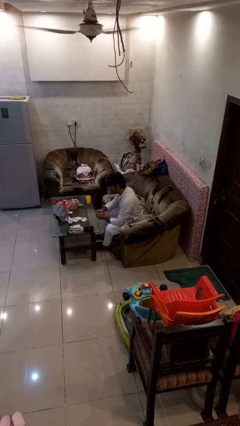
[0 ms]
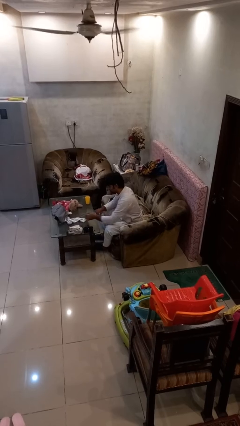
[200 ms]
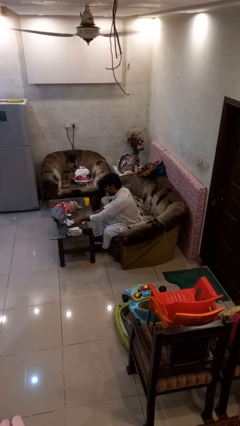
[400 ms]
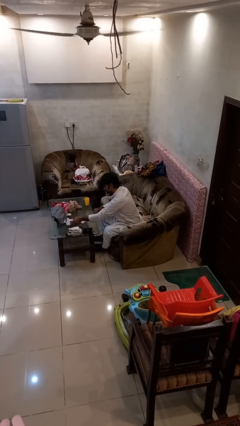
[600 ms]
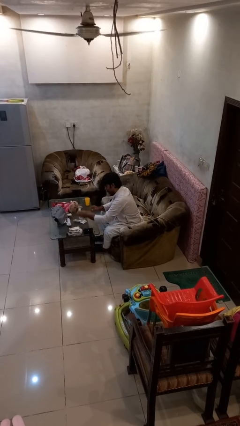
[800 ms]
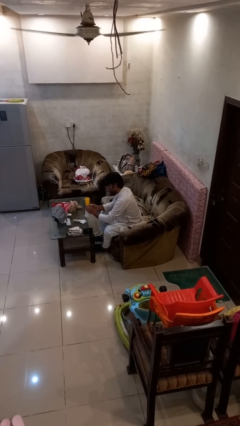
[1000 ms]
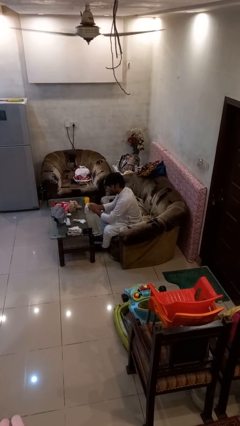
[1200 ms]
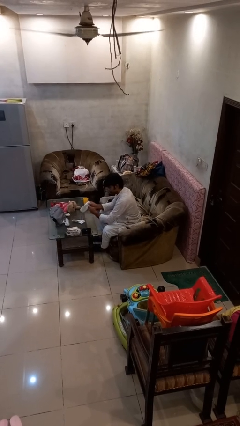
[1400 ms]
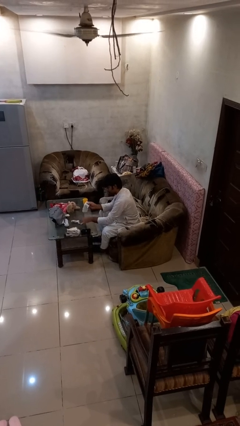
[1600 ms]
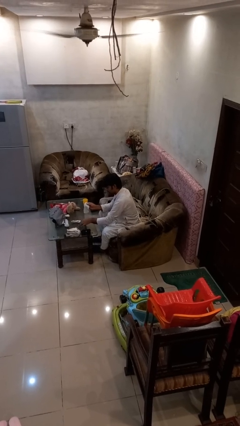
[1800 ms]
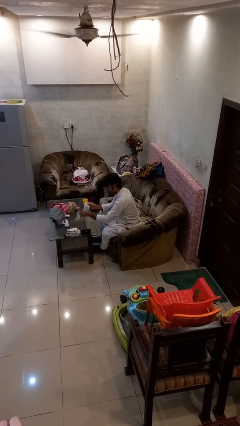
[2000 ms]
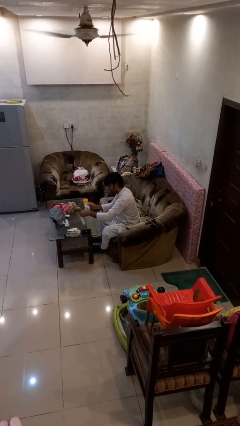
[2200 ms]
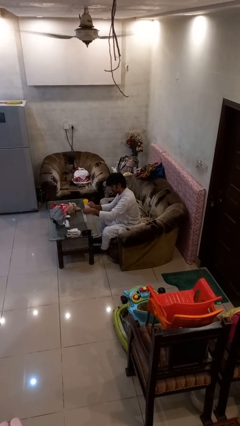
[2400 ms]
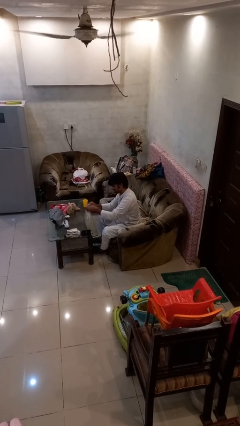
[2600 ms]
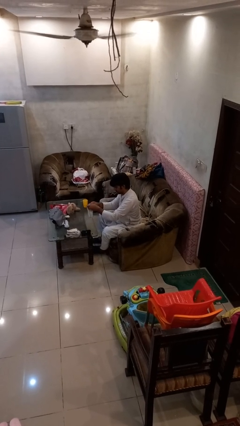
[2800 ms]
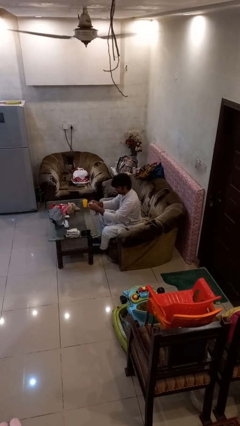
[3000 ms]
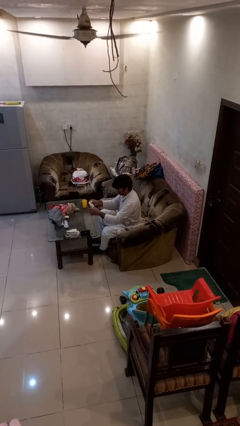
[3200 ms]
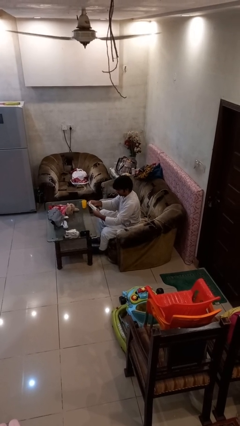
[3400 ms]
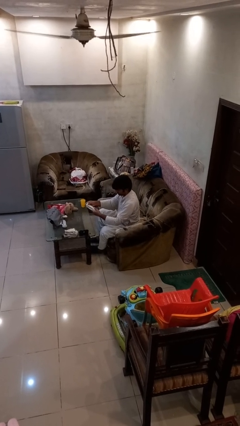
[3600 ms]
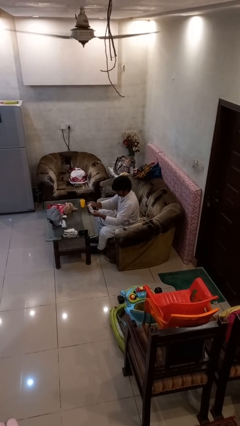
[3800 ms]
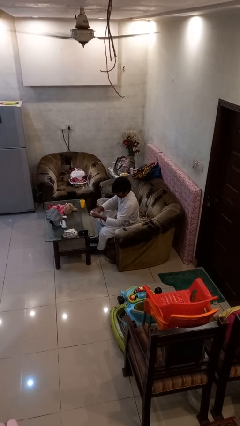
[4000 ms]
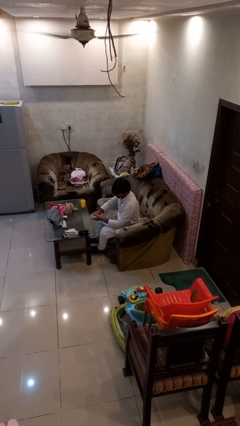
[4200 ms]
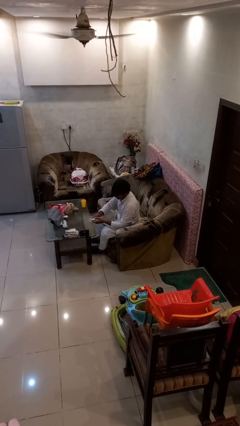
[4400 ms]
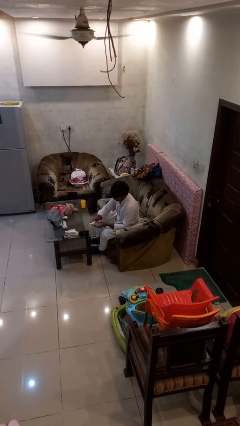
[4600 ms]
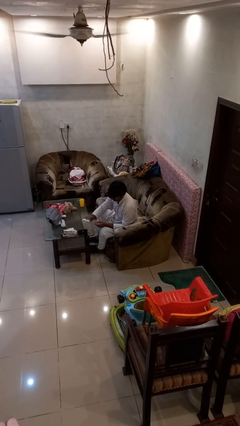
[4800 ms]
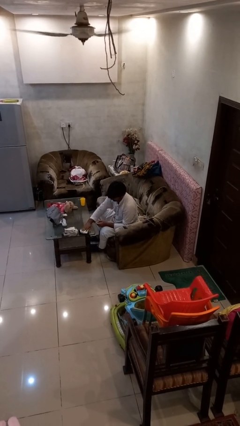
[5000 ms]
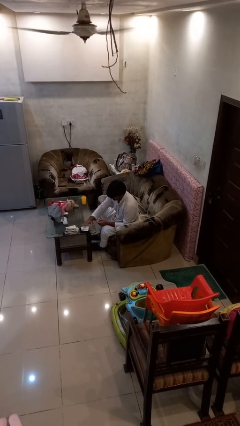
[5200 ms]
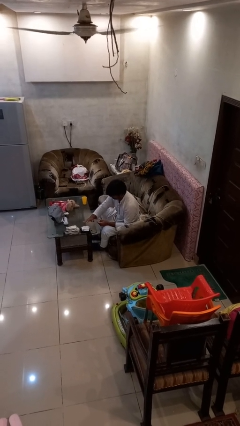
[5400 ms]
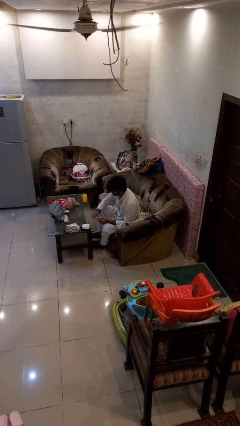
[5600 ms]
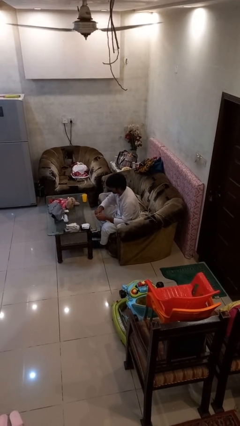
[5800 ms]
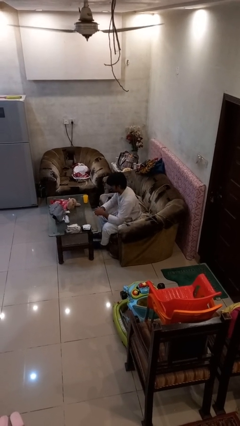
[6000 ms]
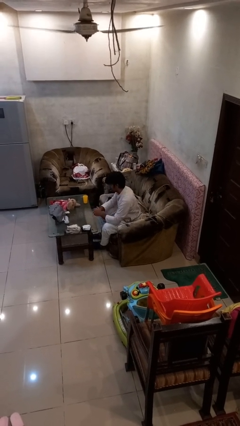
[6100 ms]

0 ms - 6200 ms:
person folds socks

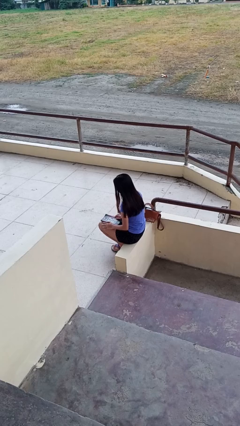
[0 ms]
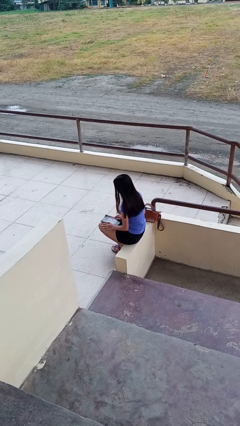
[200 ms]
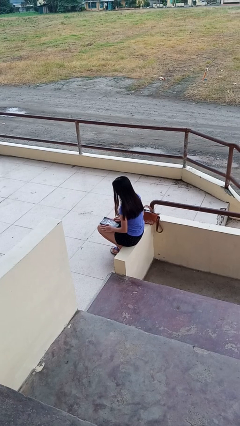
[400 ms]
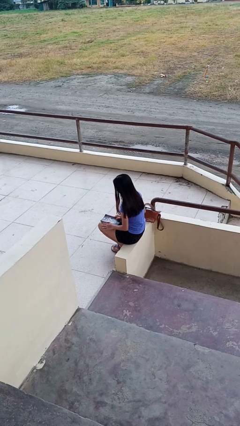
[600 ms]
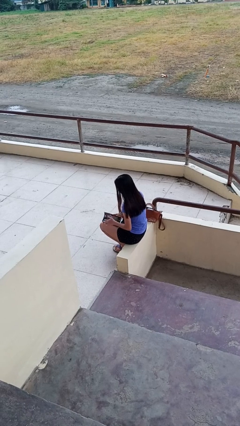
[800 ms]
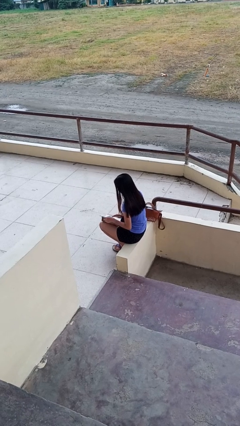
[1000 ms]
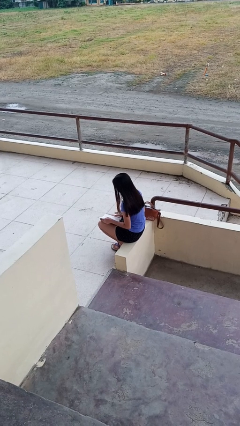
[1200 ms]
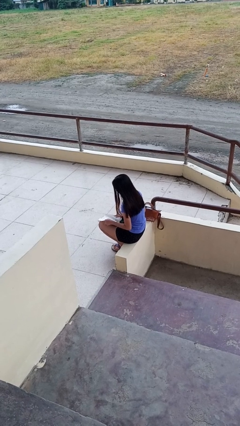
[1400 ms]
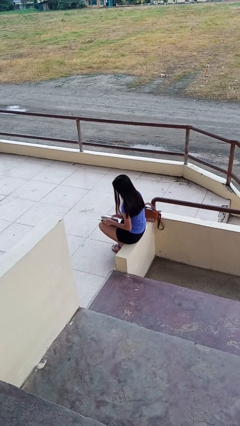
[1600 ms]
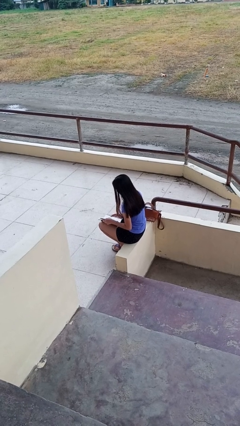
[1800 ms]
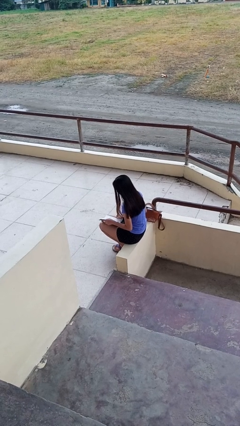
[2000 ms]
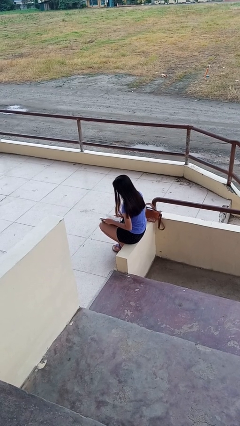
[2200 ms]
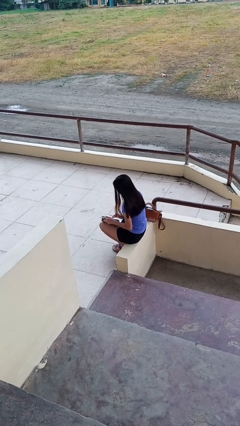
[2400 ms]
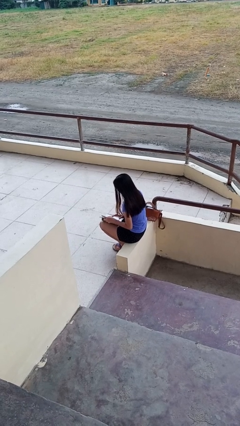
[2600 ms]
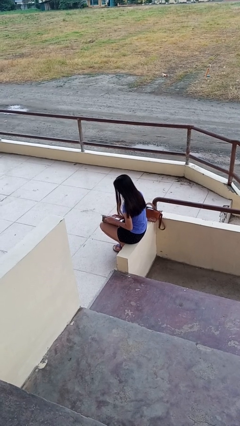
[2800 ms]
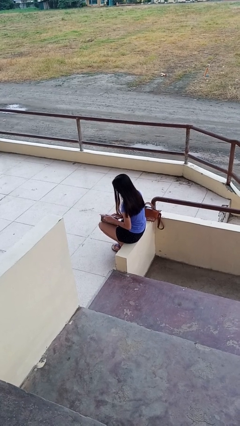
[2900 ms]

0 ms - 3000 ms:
person reads book

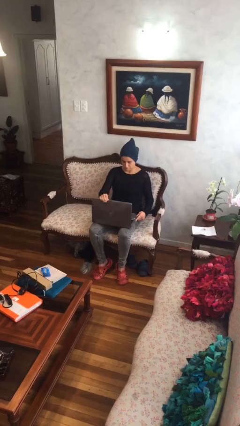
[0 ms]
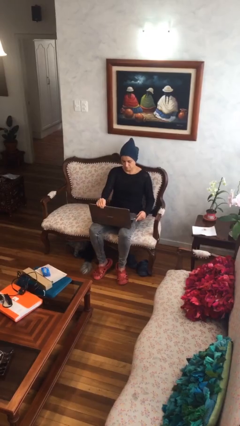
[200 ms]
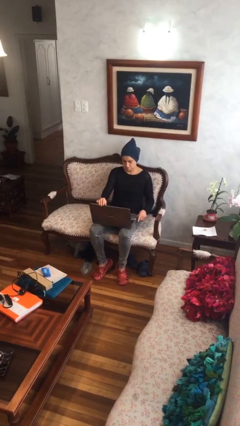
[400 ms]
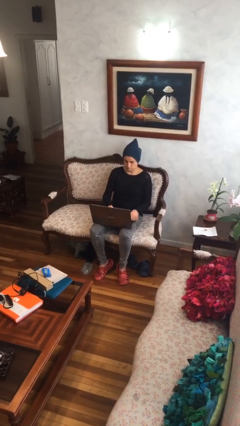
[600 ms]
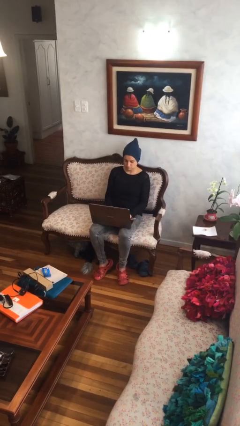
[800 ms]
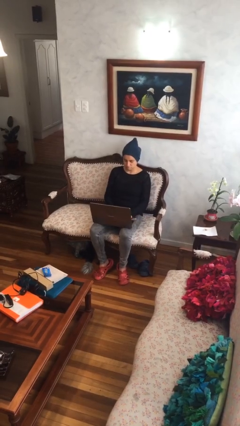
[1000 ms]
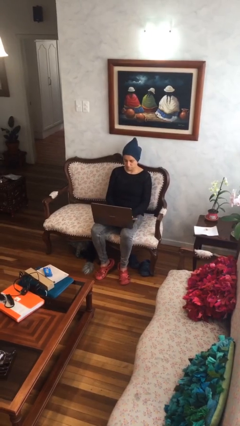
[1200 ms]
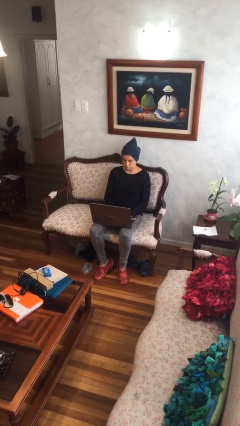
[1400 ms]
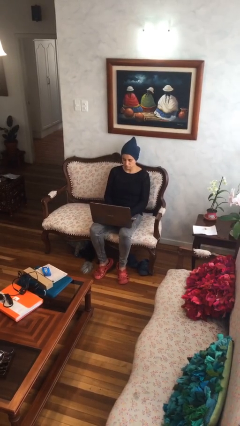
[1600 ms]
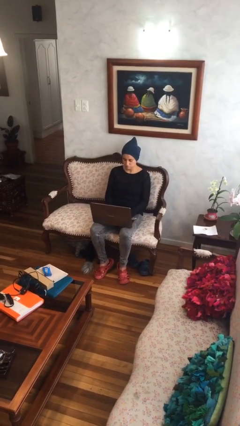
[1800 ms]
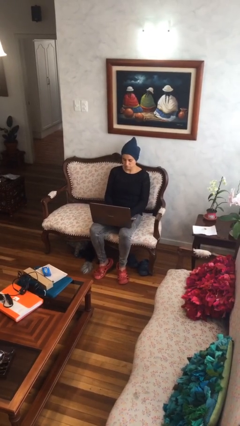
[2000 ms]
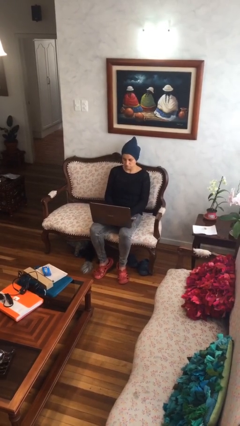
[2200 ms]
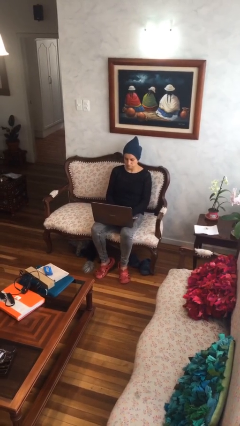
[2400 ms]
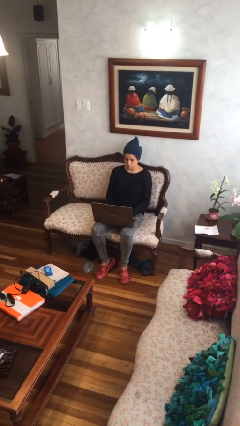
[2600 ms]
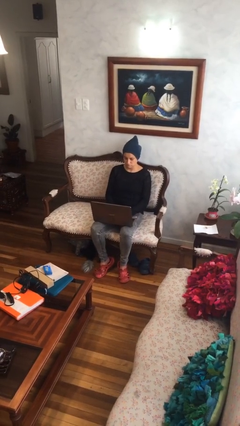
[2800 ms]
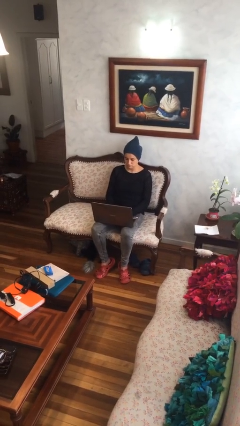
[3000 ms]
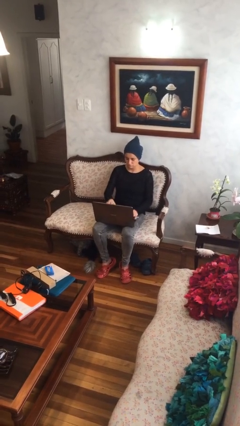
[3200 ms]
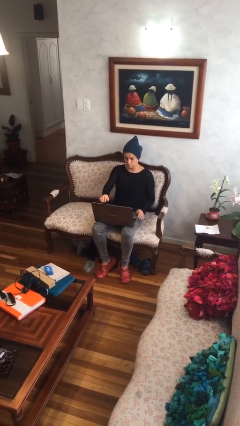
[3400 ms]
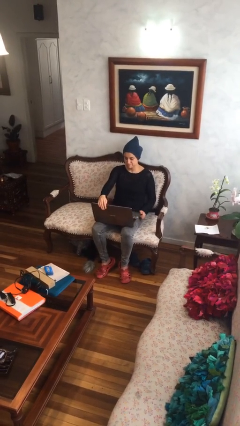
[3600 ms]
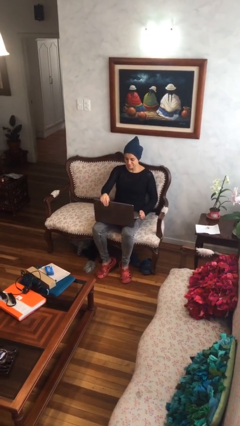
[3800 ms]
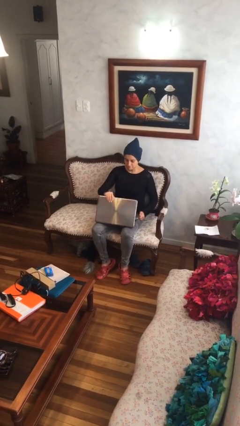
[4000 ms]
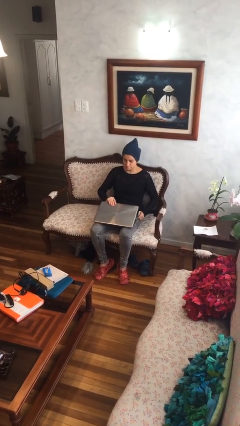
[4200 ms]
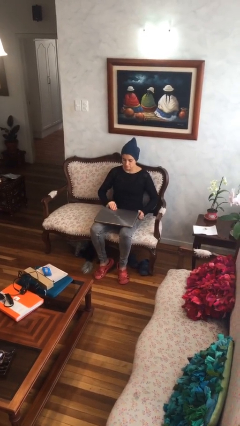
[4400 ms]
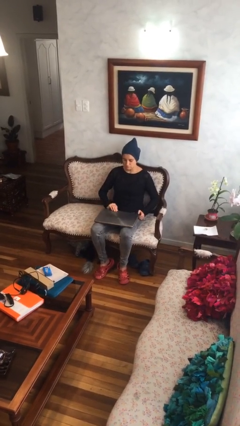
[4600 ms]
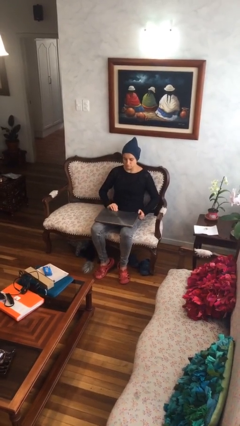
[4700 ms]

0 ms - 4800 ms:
person interacts with laptop

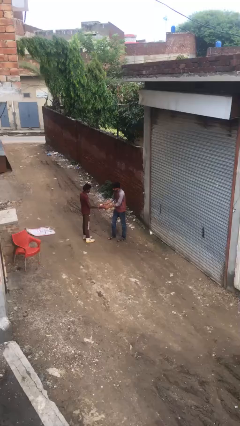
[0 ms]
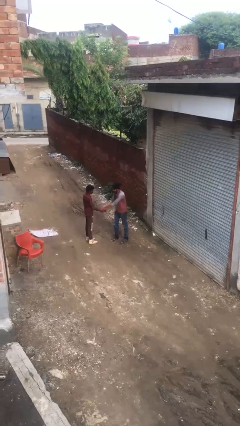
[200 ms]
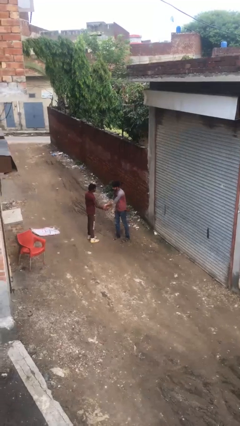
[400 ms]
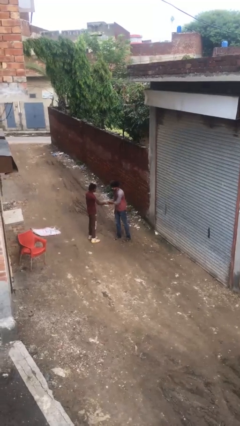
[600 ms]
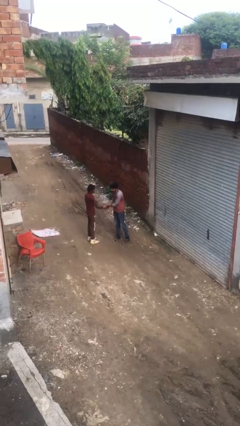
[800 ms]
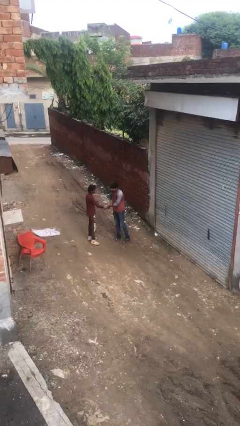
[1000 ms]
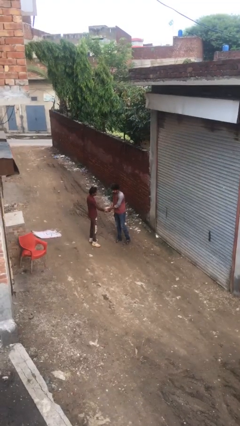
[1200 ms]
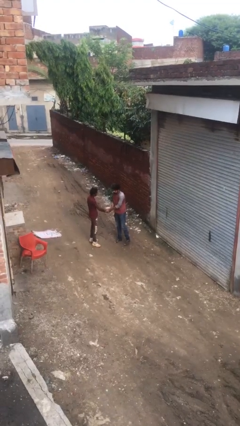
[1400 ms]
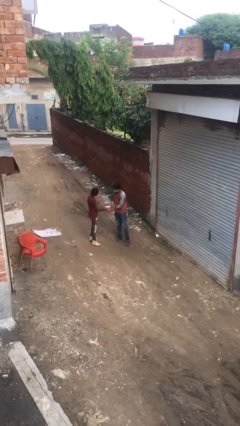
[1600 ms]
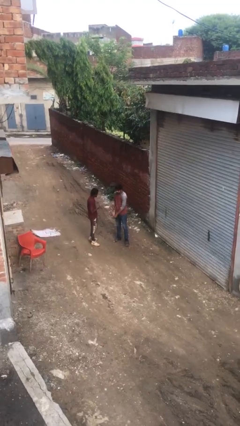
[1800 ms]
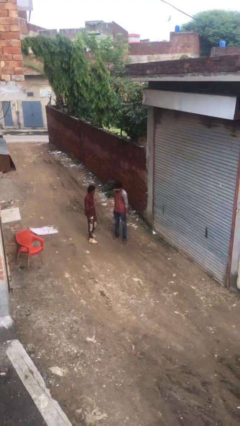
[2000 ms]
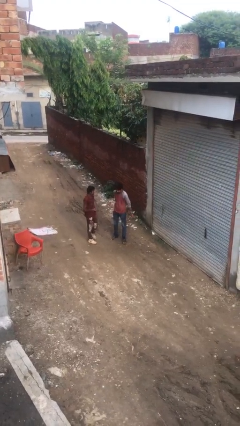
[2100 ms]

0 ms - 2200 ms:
person shakes hand

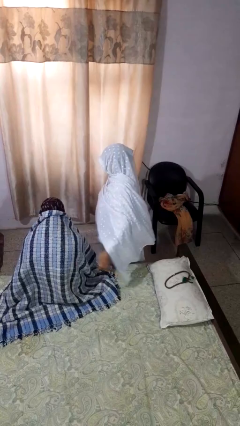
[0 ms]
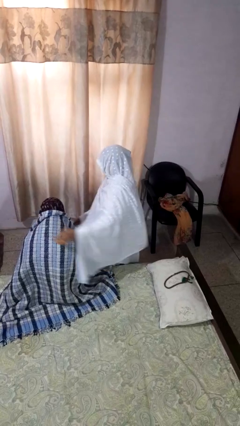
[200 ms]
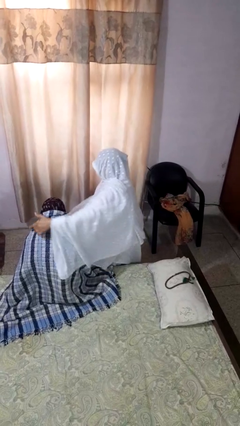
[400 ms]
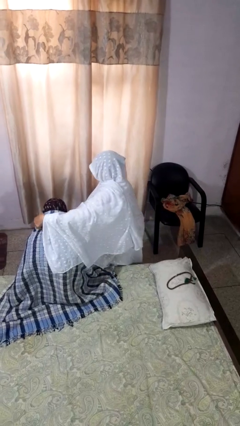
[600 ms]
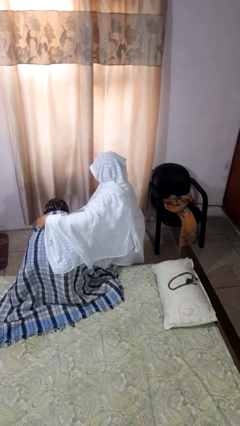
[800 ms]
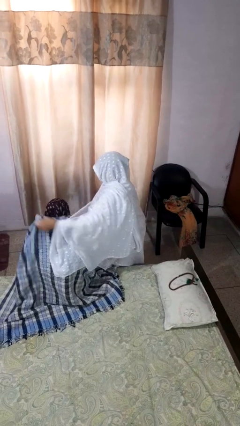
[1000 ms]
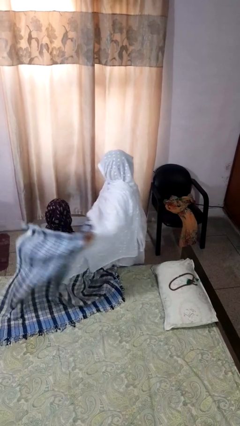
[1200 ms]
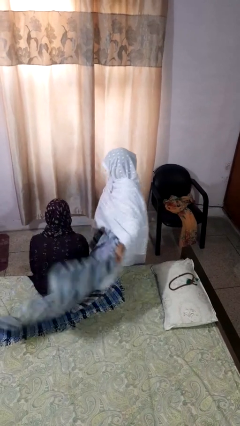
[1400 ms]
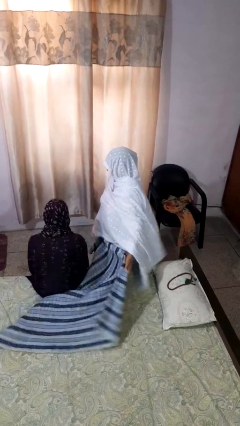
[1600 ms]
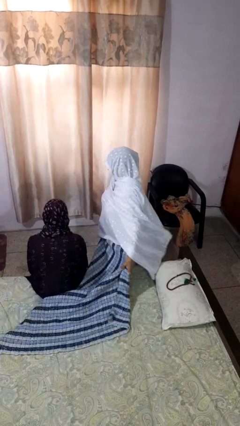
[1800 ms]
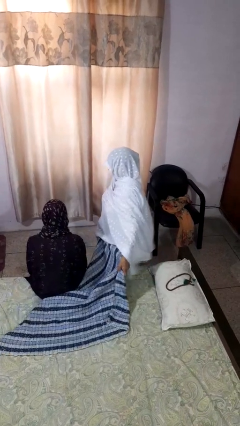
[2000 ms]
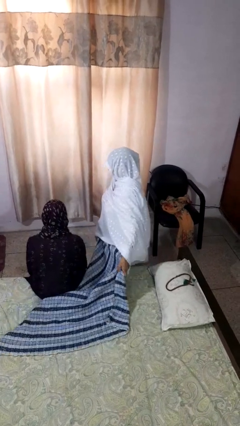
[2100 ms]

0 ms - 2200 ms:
person uncovers friend with blanket
